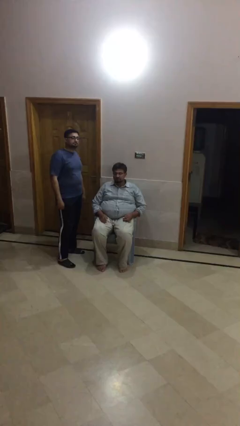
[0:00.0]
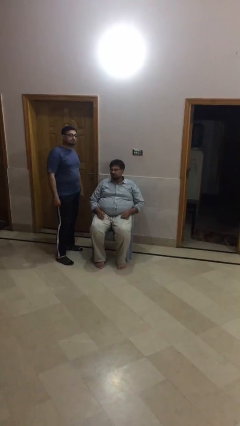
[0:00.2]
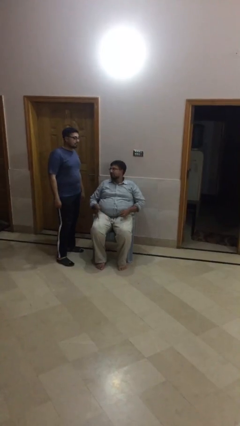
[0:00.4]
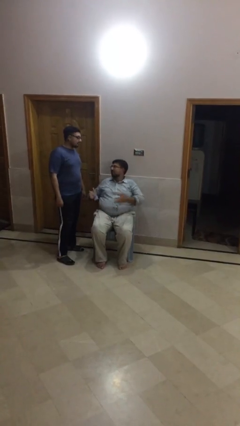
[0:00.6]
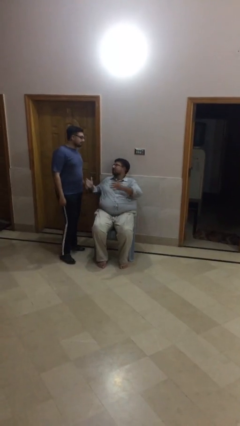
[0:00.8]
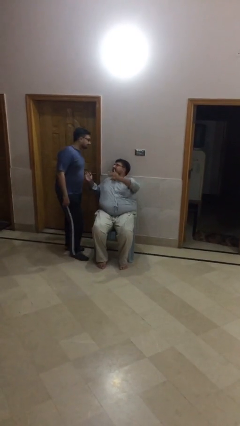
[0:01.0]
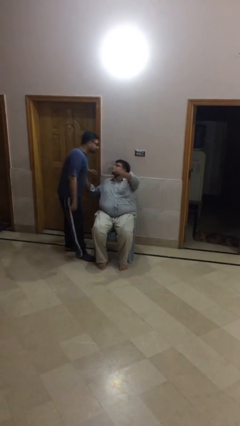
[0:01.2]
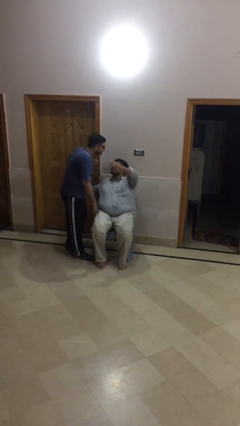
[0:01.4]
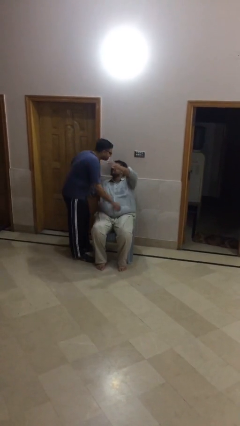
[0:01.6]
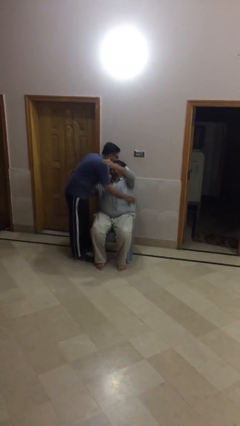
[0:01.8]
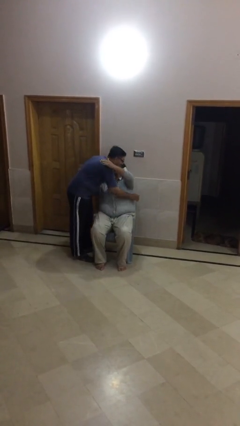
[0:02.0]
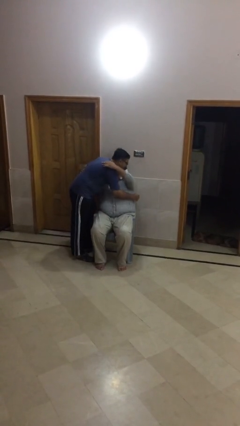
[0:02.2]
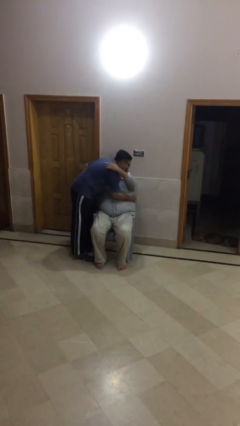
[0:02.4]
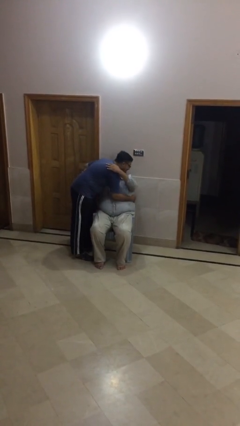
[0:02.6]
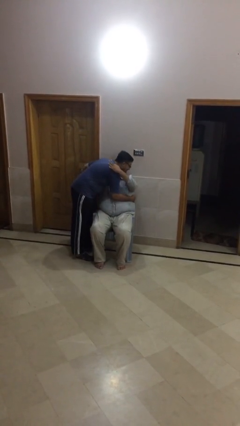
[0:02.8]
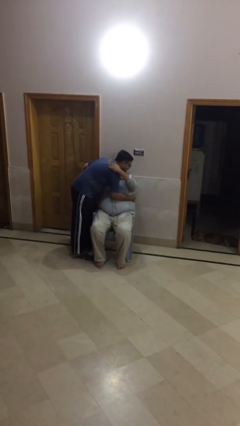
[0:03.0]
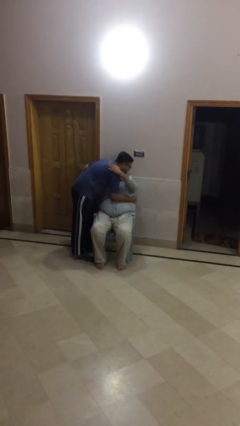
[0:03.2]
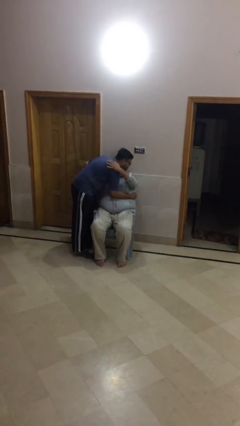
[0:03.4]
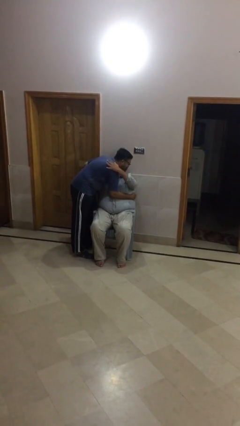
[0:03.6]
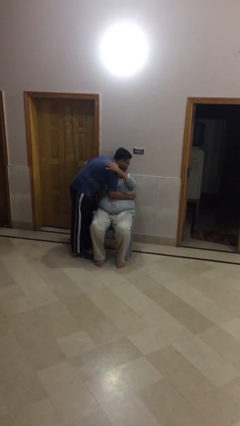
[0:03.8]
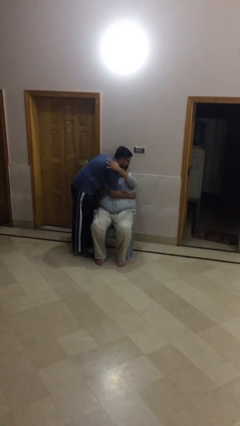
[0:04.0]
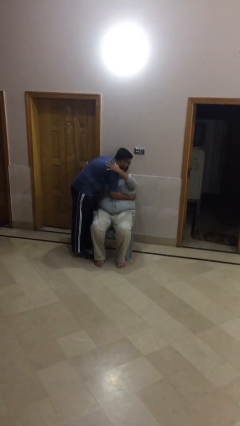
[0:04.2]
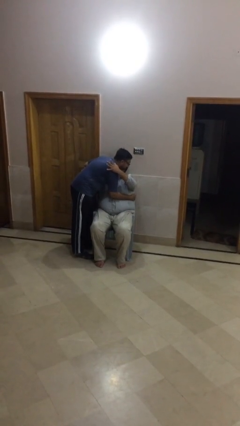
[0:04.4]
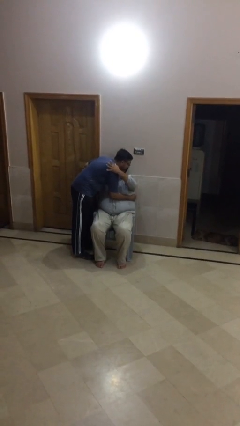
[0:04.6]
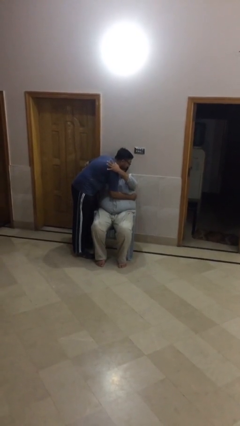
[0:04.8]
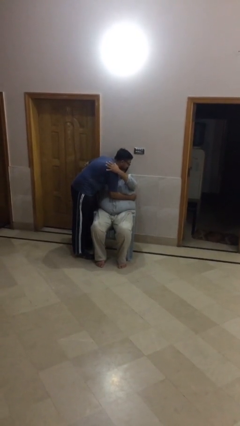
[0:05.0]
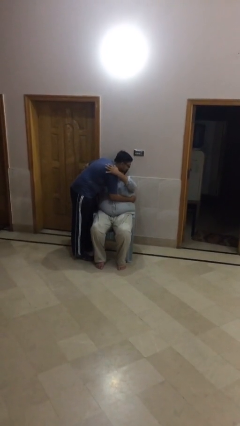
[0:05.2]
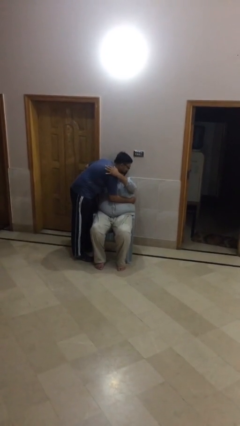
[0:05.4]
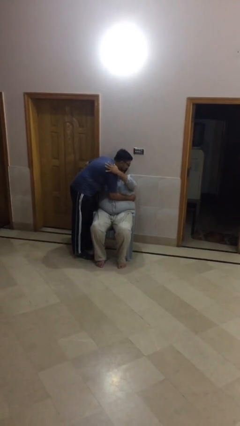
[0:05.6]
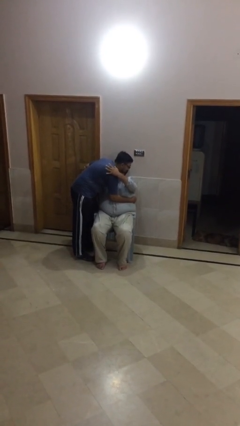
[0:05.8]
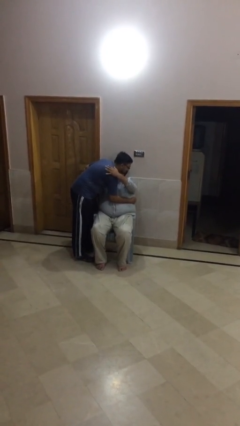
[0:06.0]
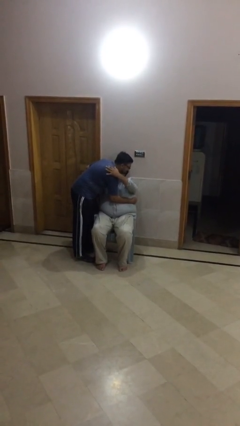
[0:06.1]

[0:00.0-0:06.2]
person embraces person

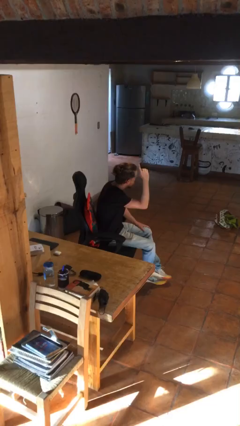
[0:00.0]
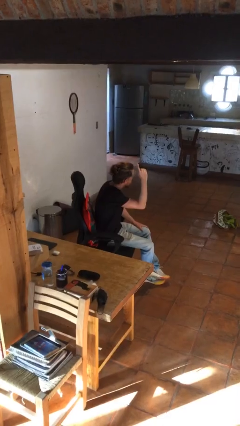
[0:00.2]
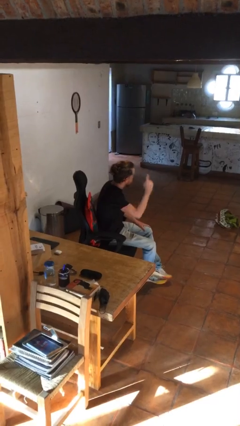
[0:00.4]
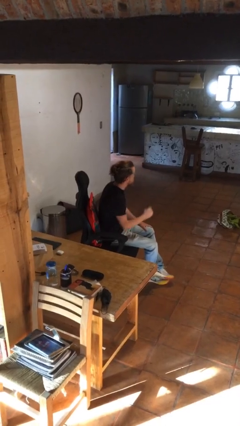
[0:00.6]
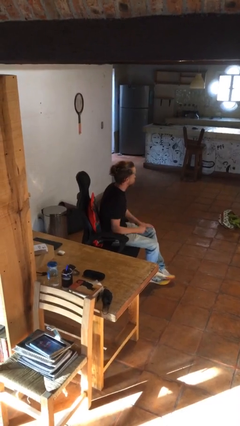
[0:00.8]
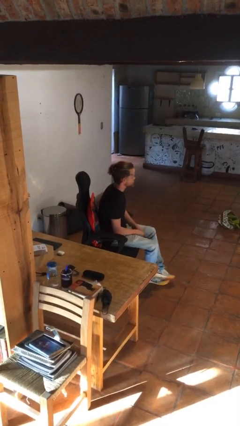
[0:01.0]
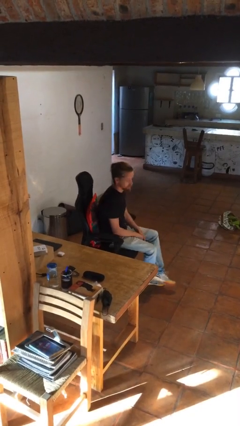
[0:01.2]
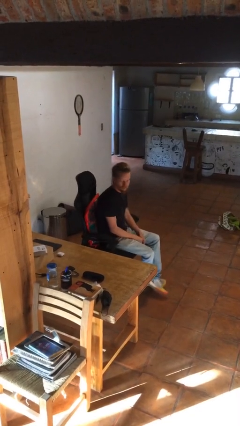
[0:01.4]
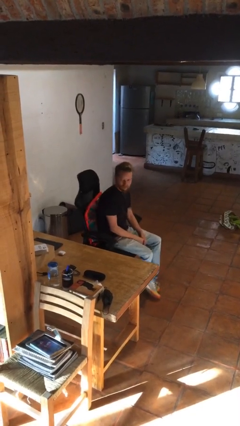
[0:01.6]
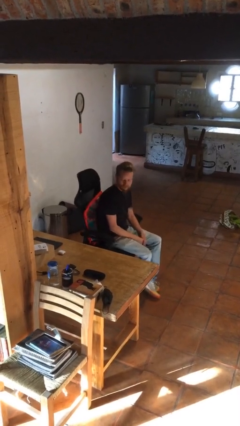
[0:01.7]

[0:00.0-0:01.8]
person gestures lower hand

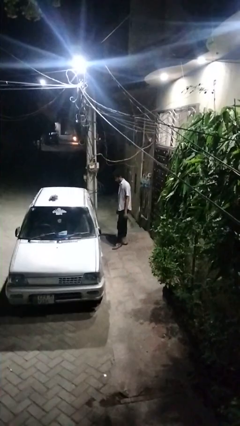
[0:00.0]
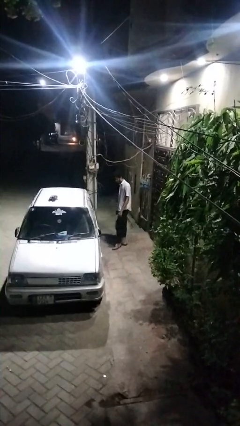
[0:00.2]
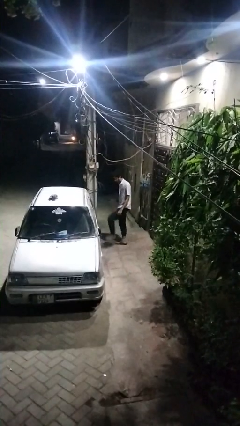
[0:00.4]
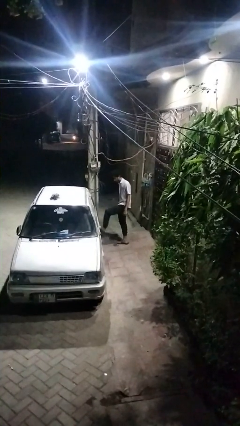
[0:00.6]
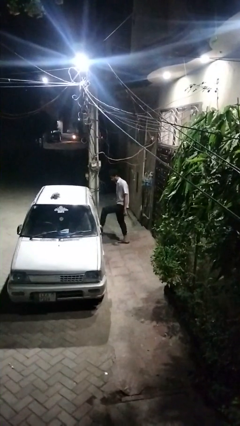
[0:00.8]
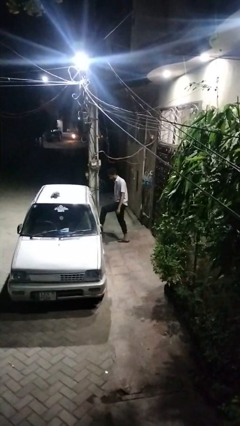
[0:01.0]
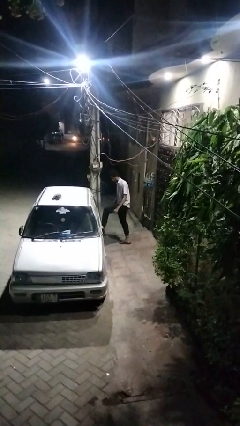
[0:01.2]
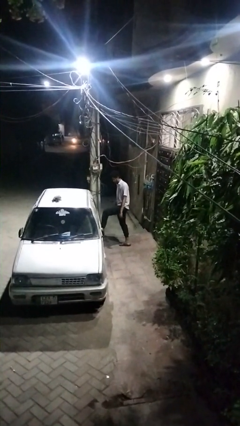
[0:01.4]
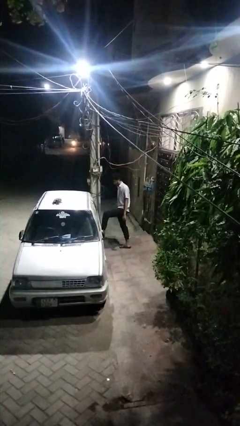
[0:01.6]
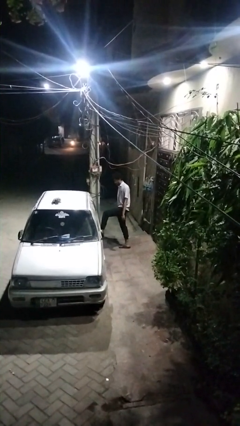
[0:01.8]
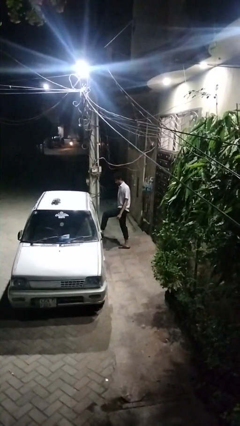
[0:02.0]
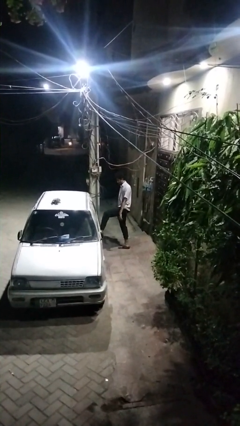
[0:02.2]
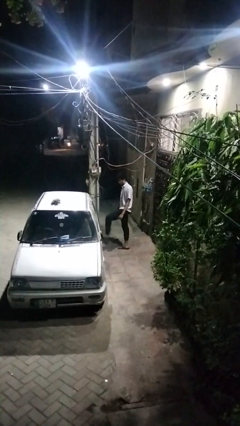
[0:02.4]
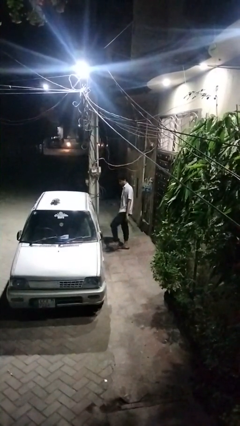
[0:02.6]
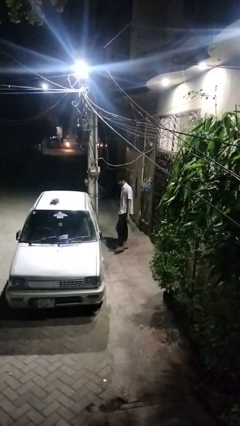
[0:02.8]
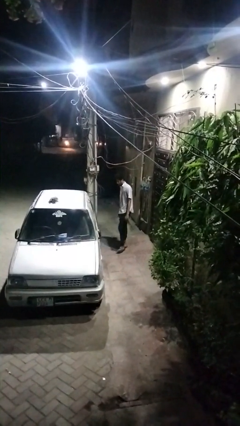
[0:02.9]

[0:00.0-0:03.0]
person kicks car tires

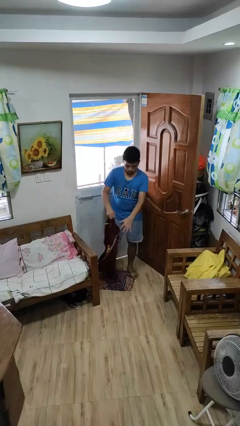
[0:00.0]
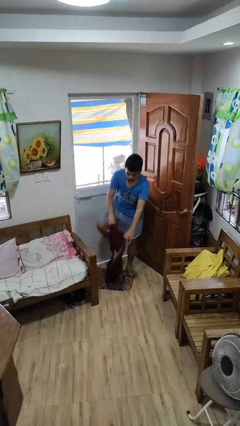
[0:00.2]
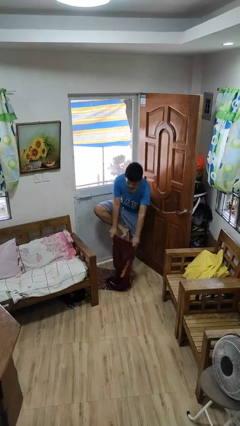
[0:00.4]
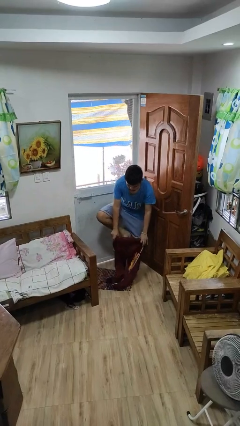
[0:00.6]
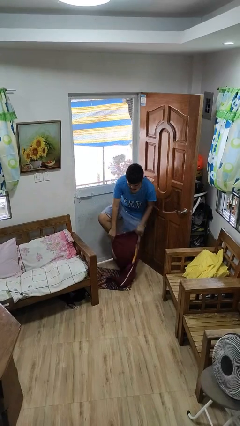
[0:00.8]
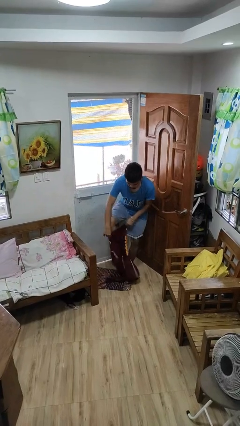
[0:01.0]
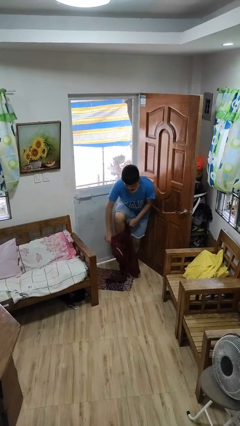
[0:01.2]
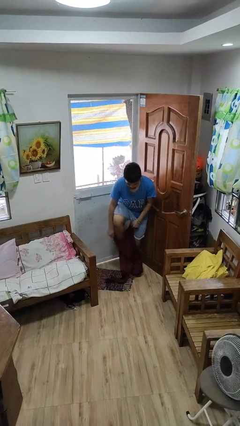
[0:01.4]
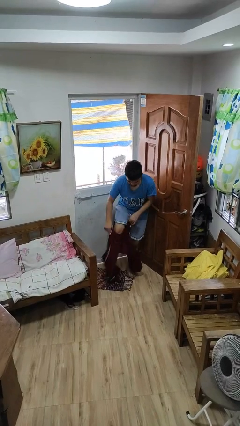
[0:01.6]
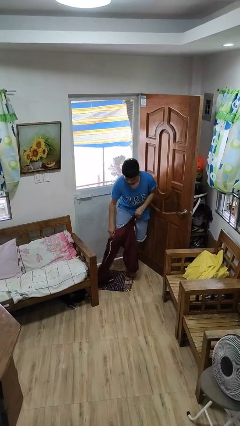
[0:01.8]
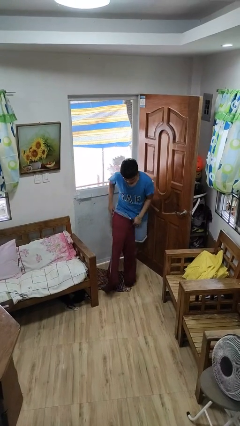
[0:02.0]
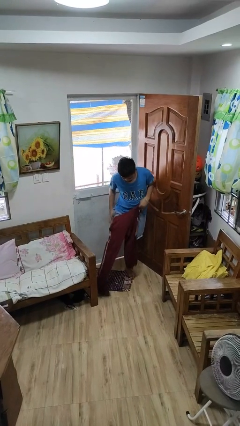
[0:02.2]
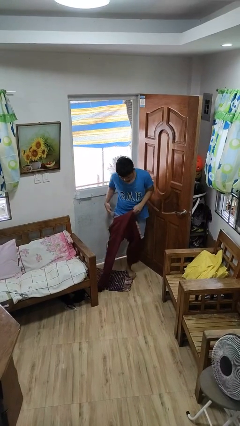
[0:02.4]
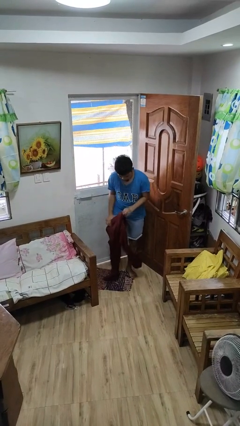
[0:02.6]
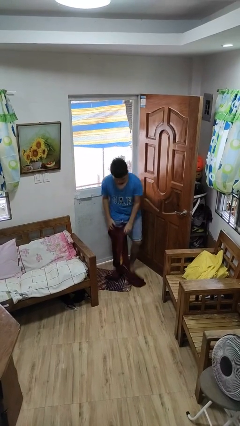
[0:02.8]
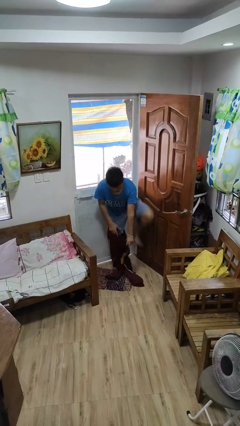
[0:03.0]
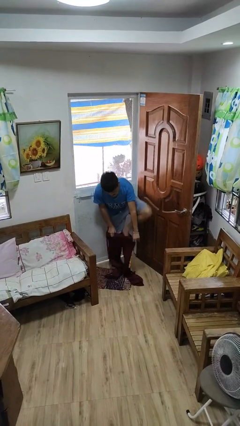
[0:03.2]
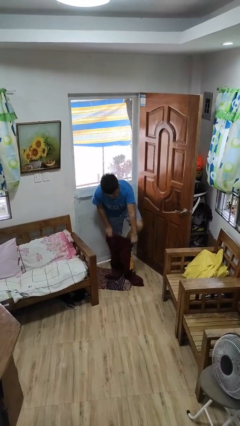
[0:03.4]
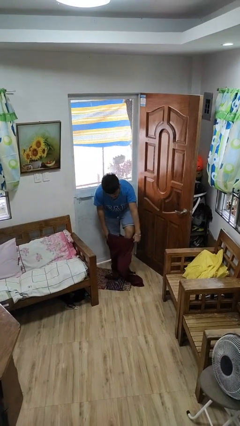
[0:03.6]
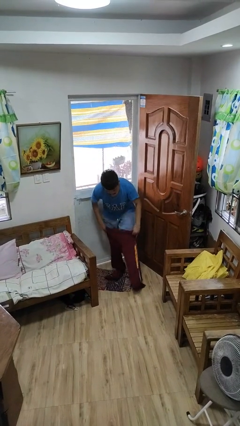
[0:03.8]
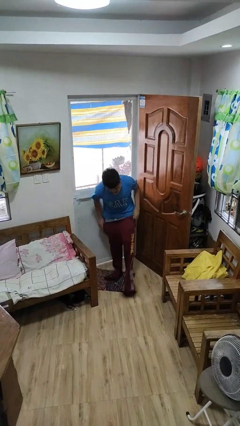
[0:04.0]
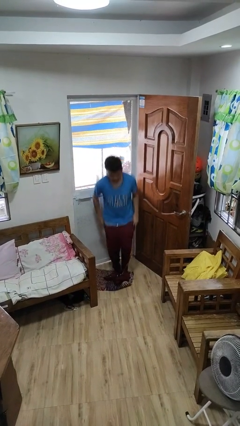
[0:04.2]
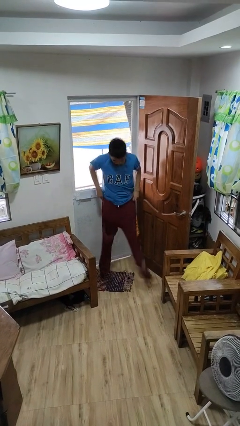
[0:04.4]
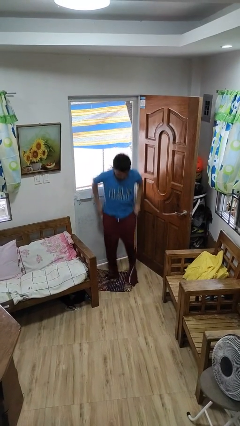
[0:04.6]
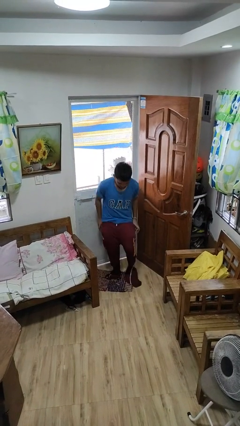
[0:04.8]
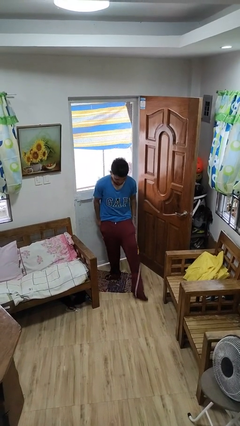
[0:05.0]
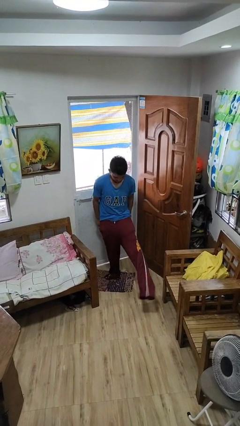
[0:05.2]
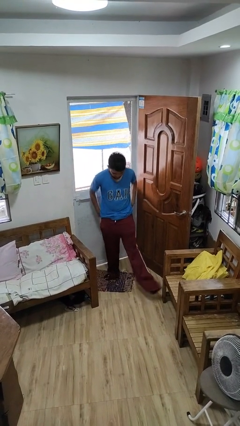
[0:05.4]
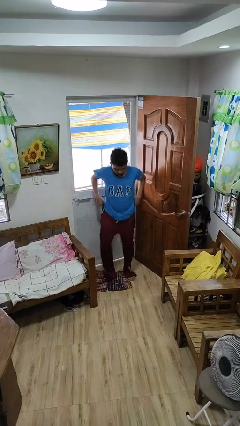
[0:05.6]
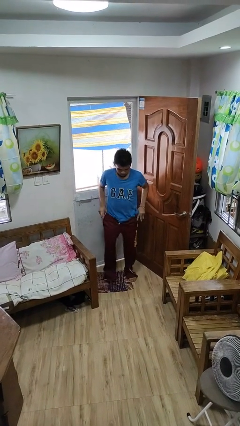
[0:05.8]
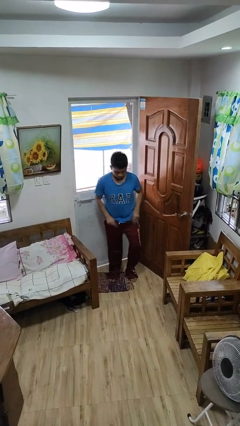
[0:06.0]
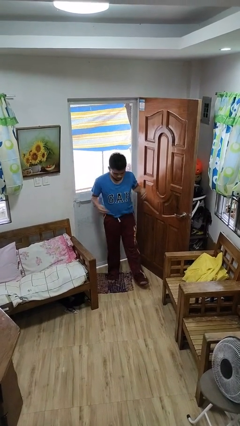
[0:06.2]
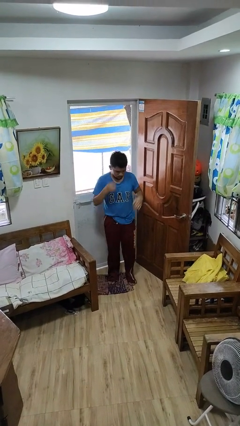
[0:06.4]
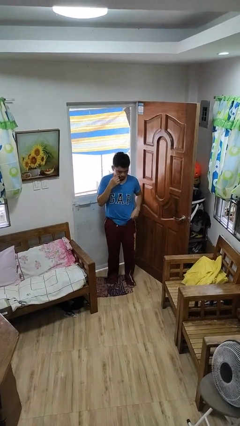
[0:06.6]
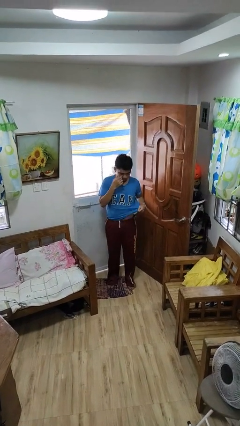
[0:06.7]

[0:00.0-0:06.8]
person puts on pants
